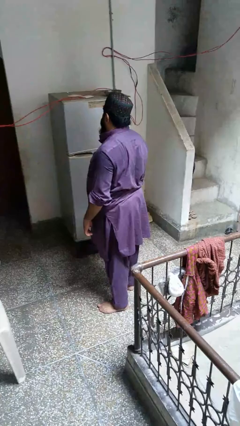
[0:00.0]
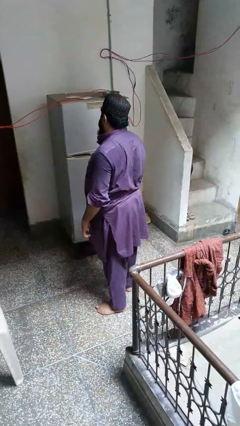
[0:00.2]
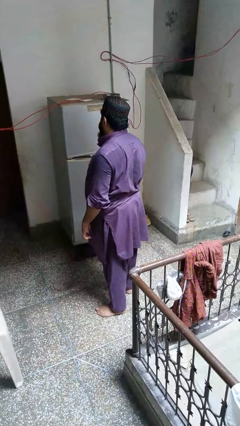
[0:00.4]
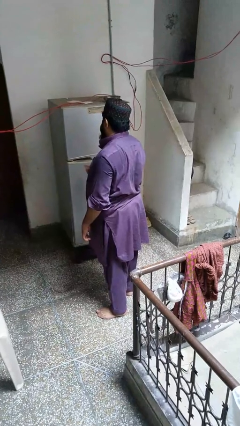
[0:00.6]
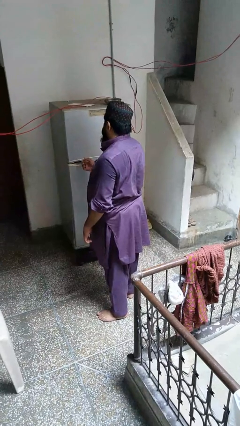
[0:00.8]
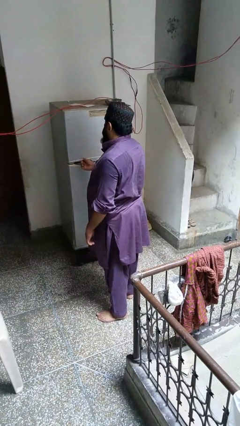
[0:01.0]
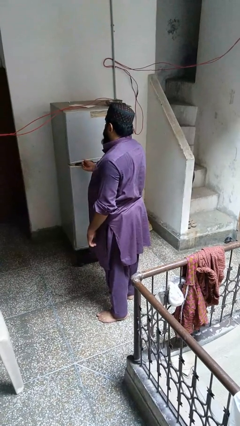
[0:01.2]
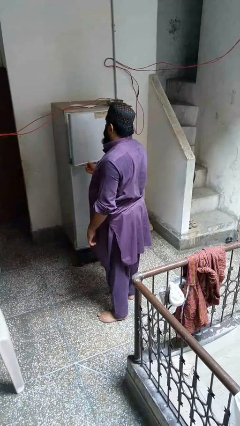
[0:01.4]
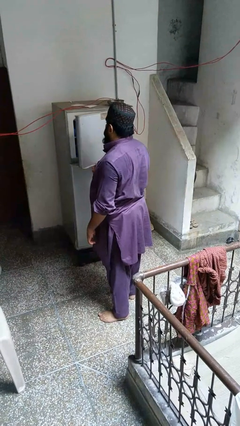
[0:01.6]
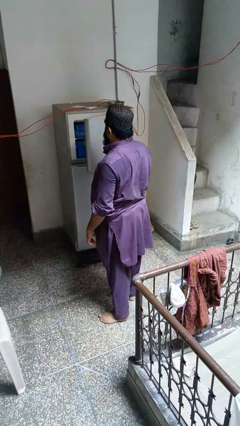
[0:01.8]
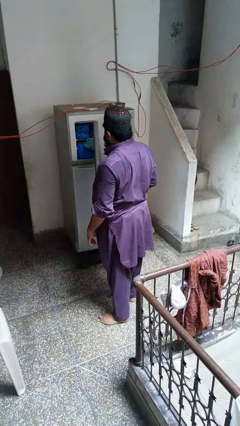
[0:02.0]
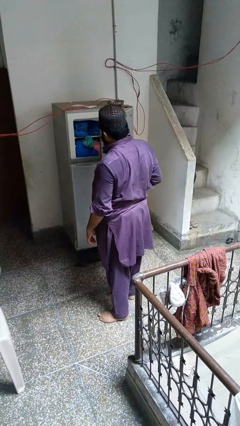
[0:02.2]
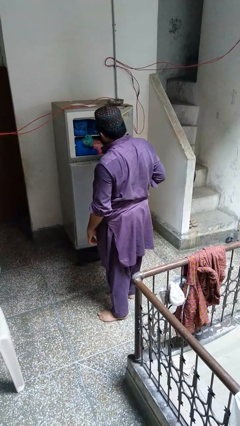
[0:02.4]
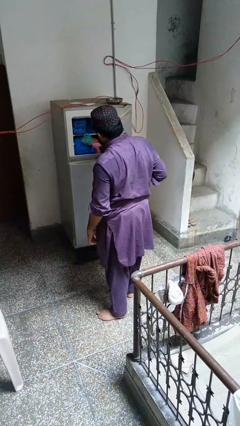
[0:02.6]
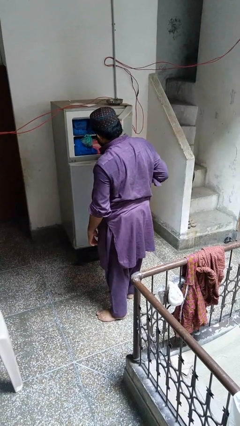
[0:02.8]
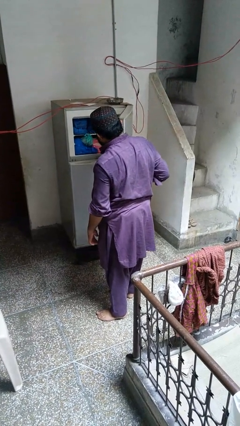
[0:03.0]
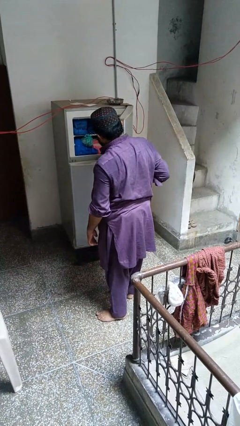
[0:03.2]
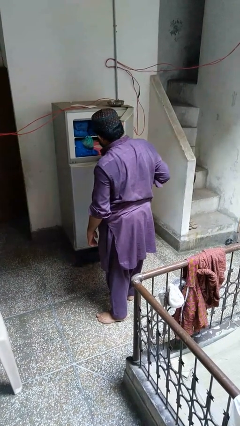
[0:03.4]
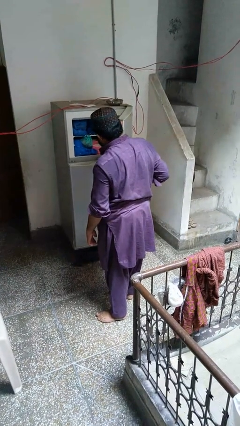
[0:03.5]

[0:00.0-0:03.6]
person opens refrigerator

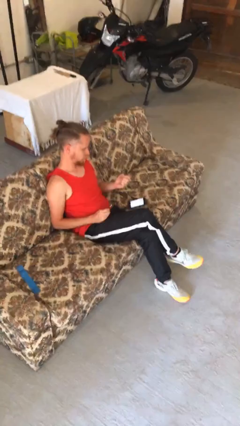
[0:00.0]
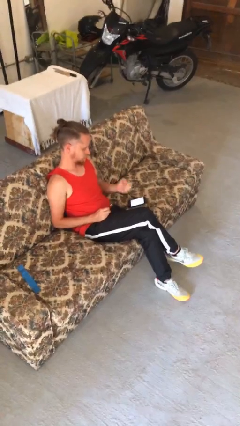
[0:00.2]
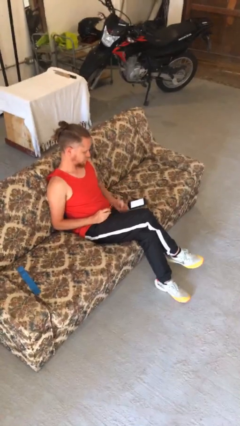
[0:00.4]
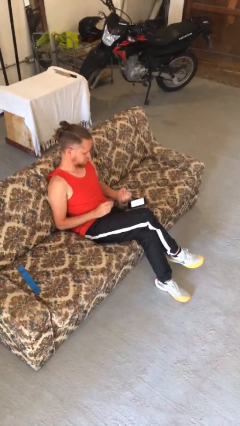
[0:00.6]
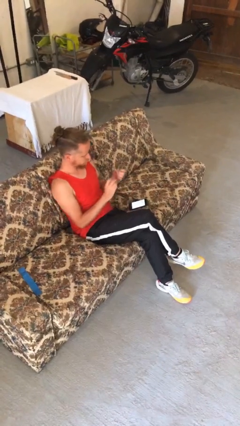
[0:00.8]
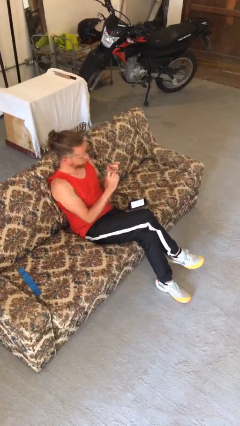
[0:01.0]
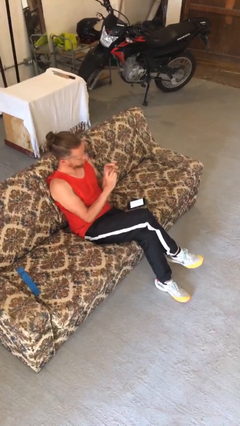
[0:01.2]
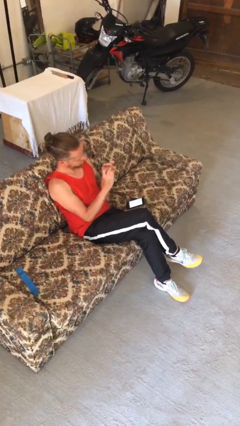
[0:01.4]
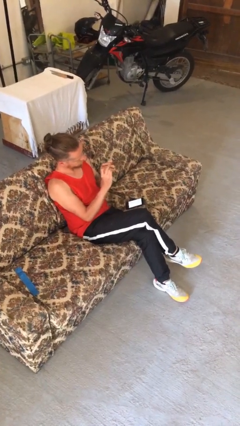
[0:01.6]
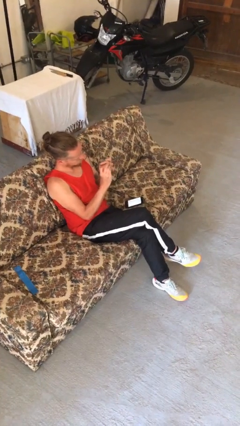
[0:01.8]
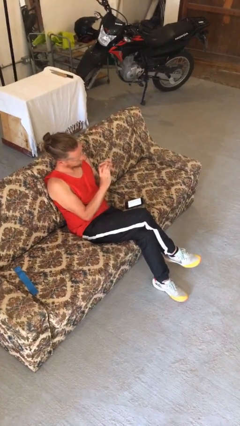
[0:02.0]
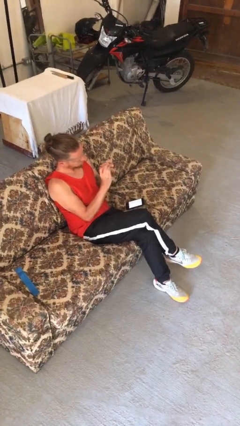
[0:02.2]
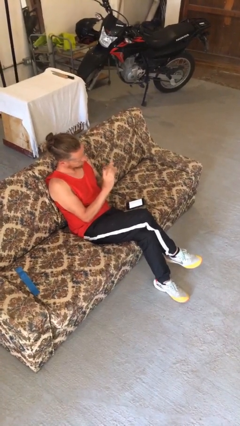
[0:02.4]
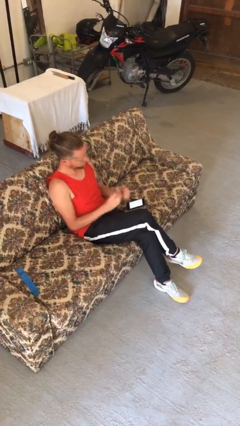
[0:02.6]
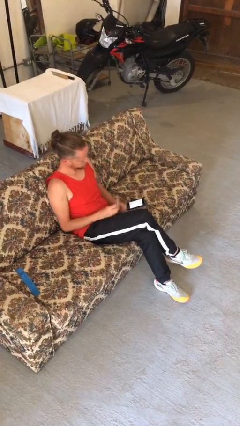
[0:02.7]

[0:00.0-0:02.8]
person files fingernails

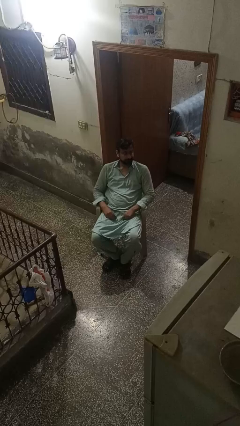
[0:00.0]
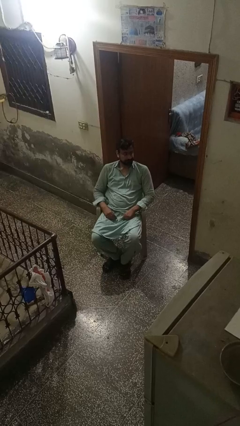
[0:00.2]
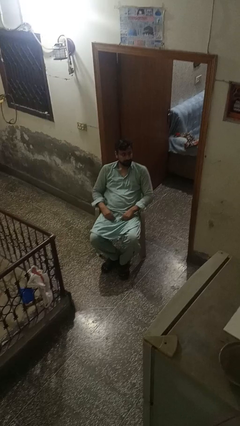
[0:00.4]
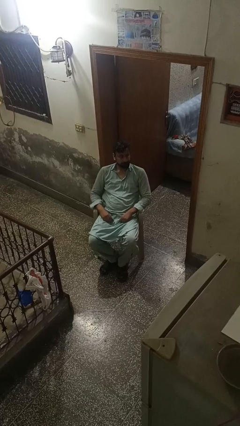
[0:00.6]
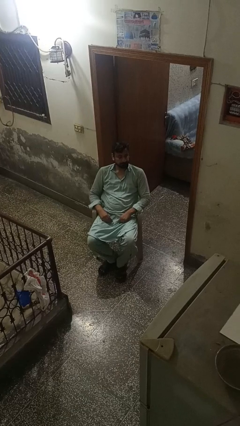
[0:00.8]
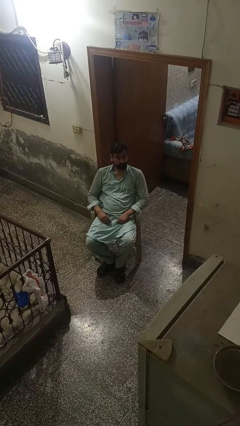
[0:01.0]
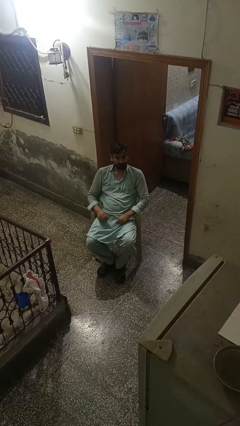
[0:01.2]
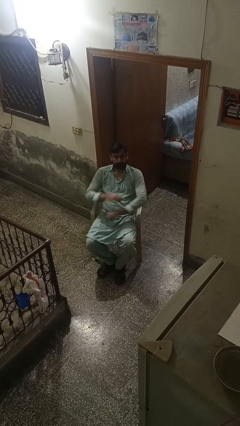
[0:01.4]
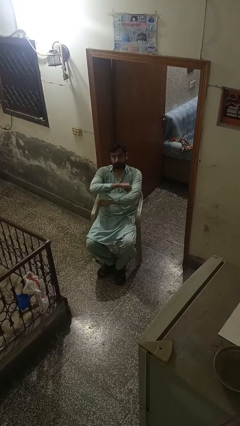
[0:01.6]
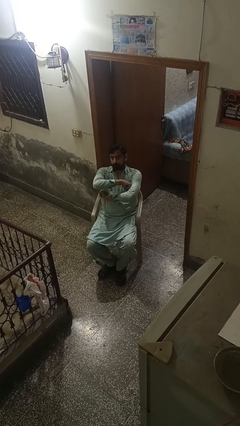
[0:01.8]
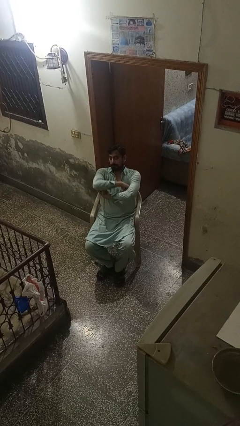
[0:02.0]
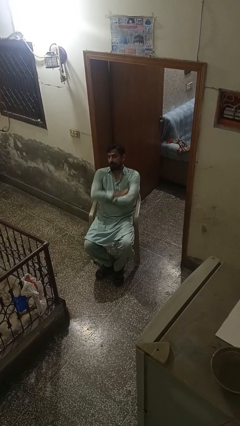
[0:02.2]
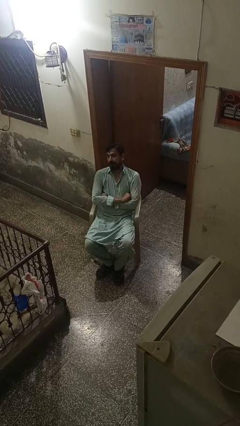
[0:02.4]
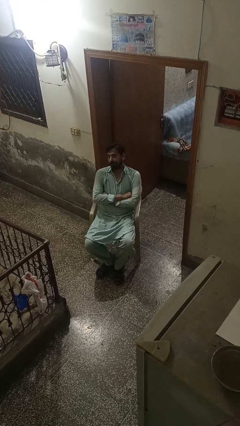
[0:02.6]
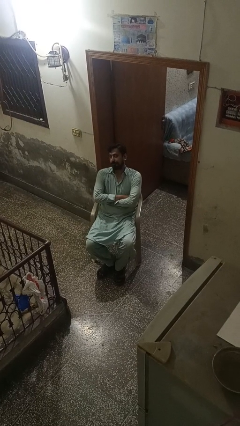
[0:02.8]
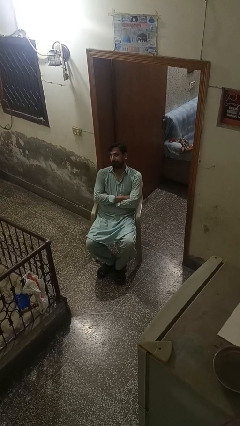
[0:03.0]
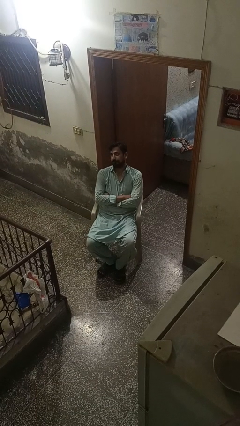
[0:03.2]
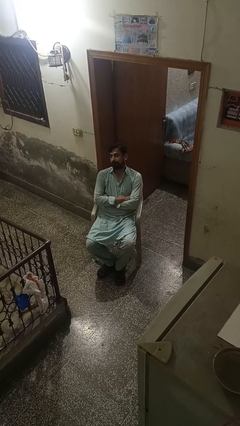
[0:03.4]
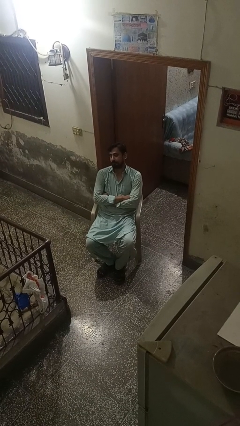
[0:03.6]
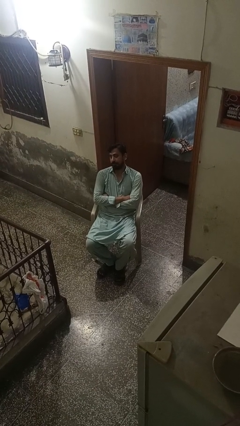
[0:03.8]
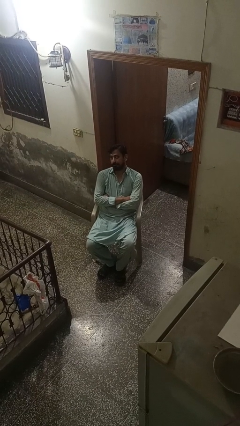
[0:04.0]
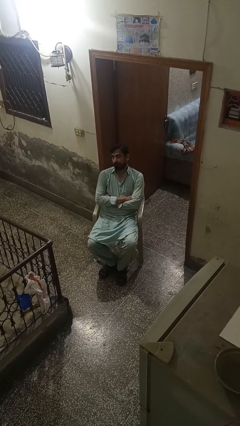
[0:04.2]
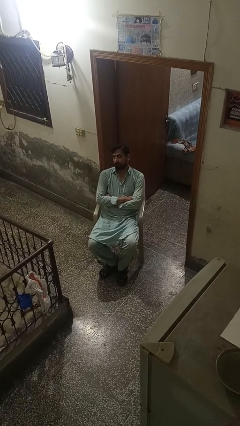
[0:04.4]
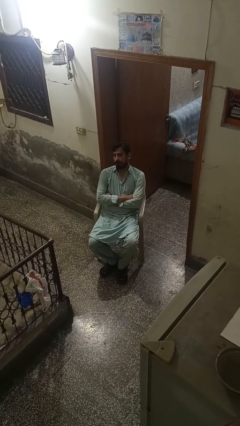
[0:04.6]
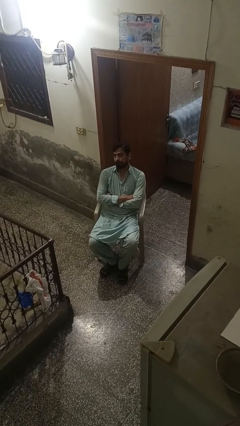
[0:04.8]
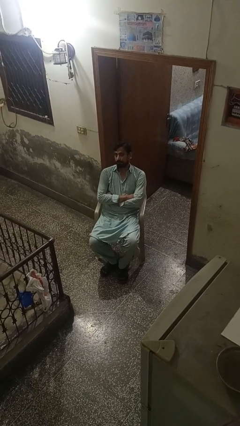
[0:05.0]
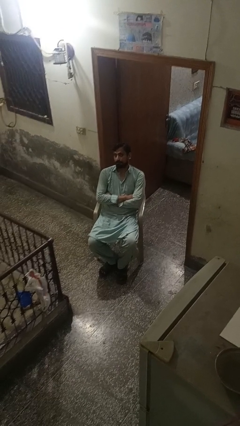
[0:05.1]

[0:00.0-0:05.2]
person crosses arms

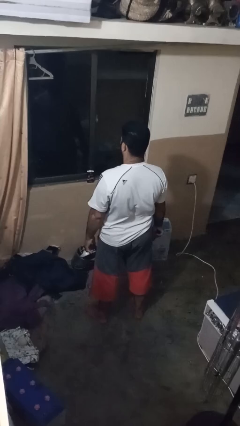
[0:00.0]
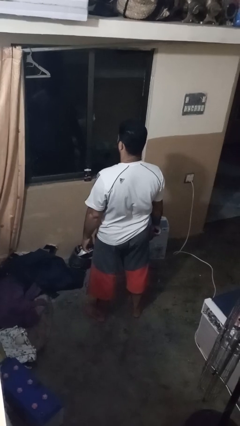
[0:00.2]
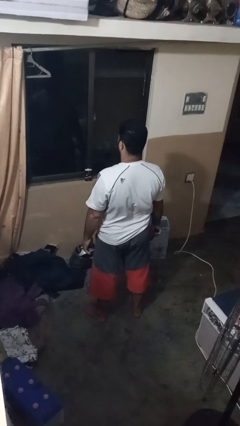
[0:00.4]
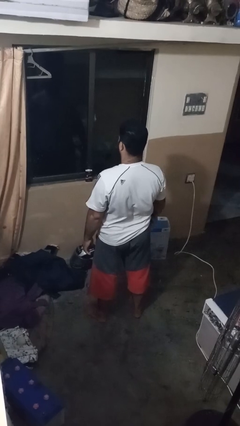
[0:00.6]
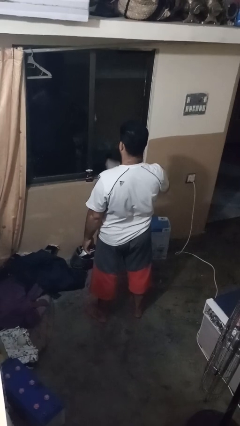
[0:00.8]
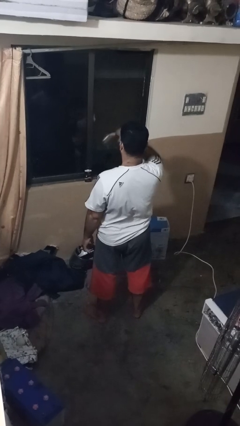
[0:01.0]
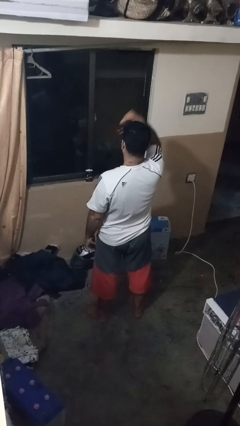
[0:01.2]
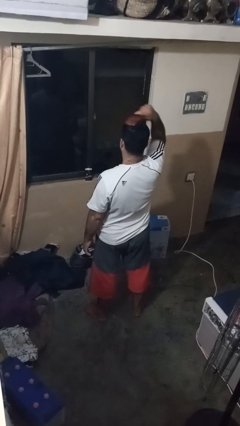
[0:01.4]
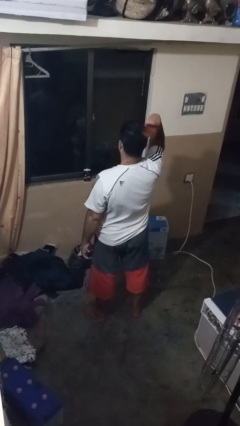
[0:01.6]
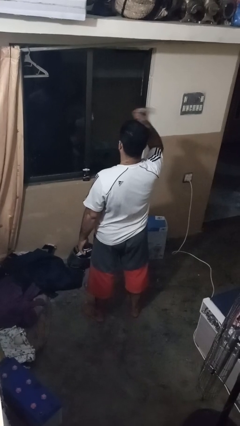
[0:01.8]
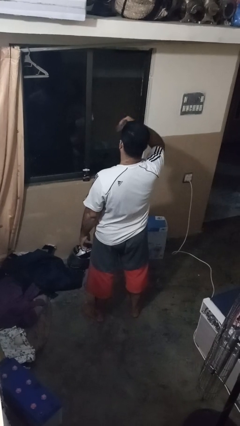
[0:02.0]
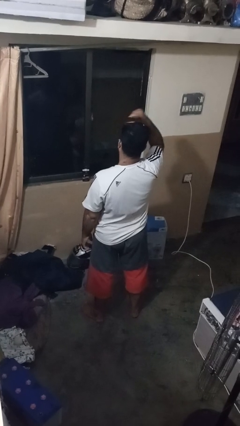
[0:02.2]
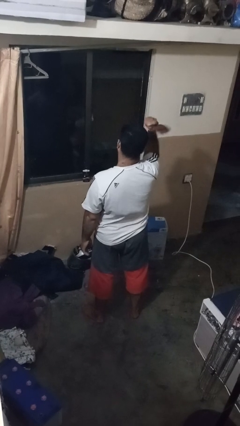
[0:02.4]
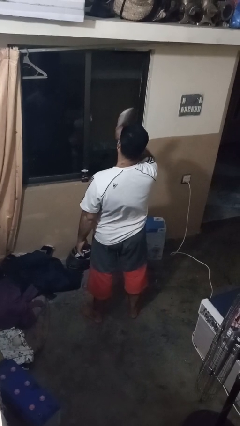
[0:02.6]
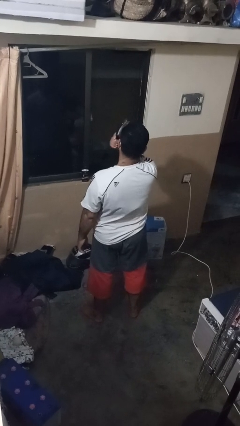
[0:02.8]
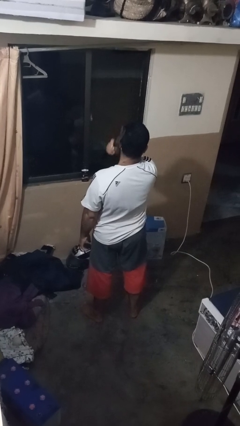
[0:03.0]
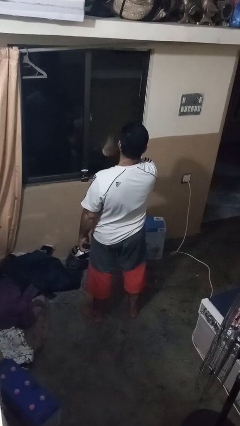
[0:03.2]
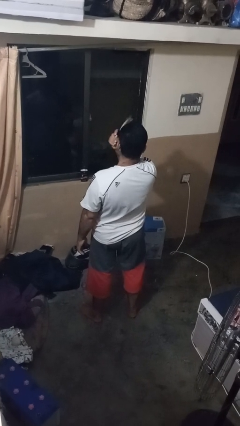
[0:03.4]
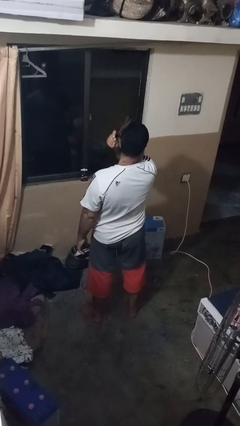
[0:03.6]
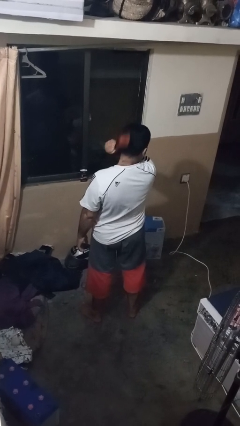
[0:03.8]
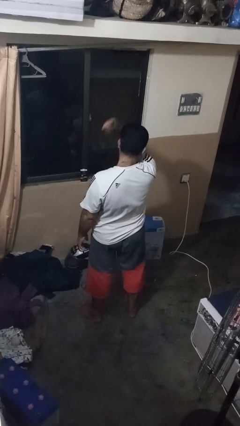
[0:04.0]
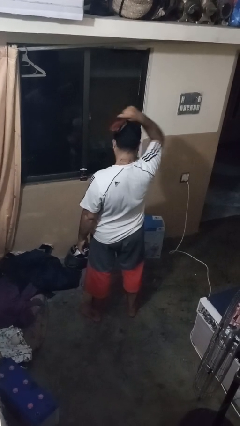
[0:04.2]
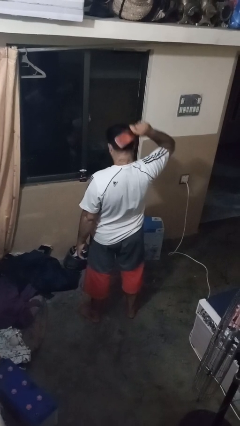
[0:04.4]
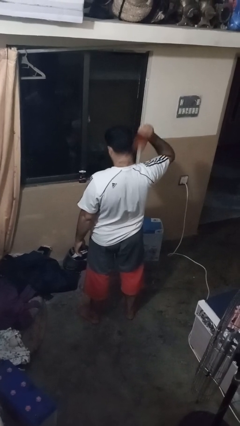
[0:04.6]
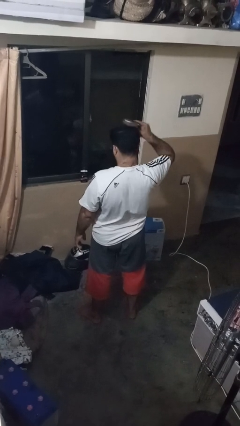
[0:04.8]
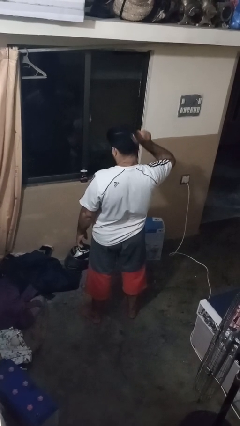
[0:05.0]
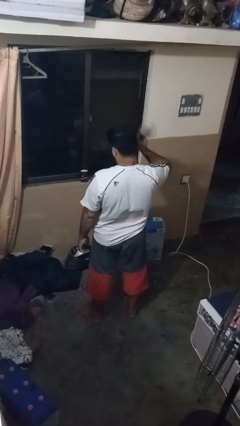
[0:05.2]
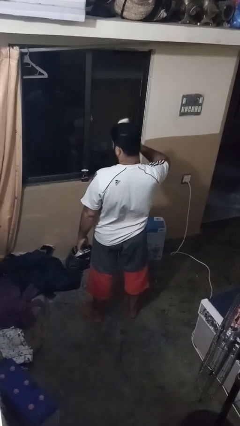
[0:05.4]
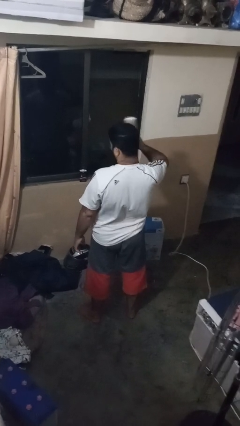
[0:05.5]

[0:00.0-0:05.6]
person brushes hair

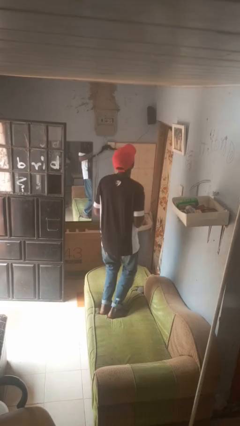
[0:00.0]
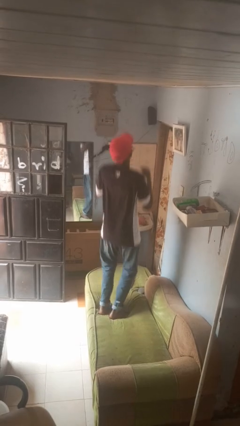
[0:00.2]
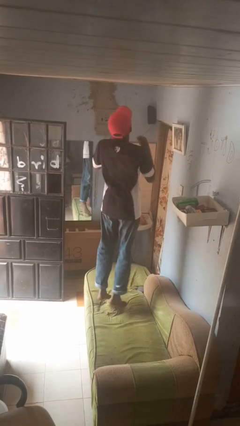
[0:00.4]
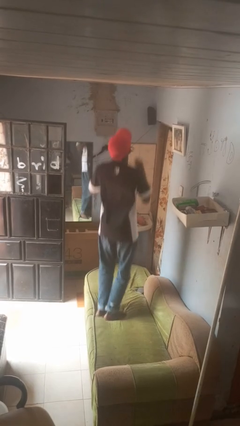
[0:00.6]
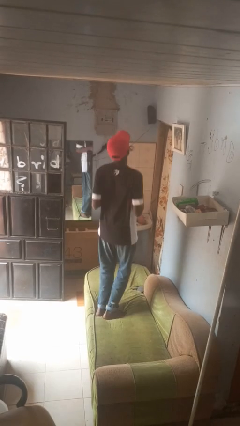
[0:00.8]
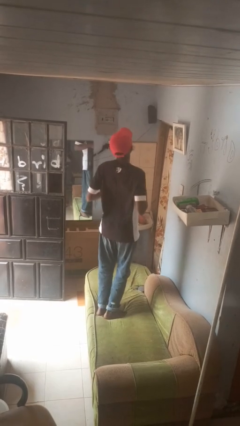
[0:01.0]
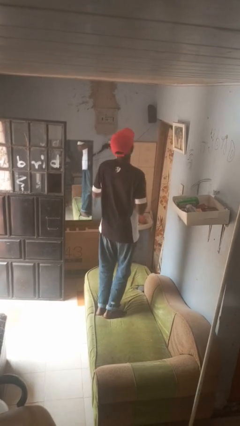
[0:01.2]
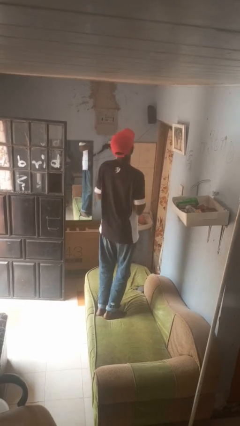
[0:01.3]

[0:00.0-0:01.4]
person jumps on couch
